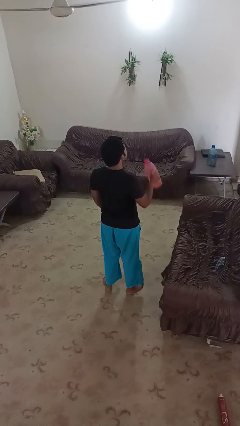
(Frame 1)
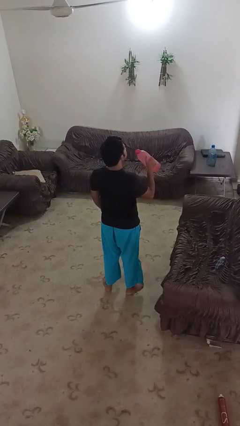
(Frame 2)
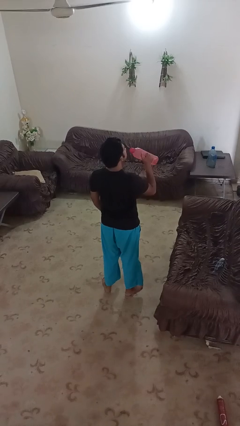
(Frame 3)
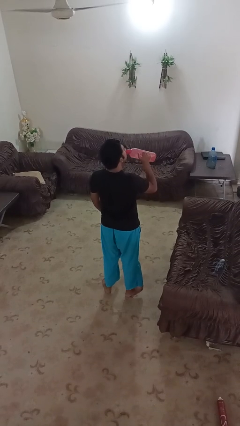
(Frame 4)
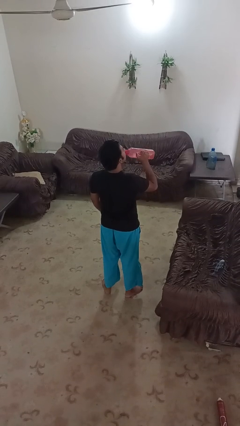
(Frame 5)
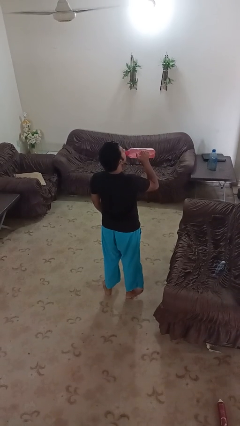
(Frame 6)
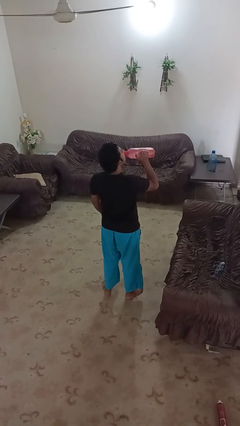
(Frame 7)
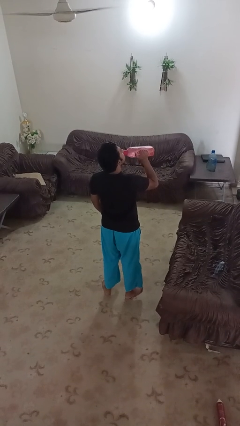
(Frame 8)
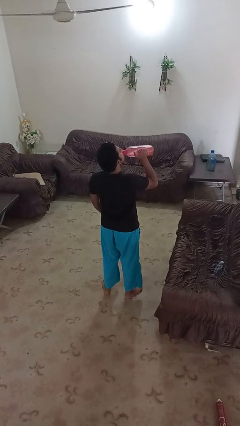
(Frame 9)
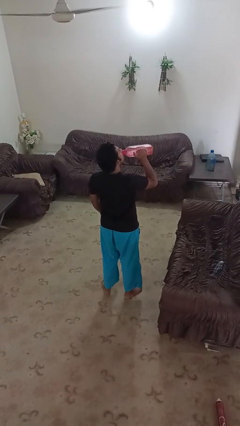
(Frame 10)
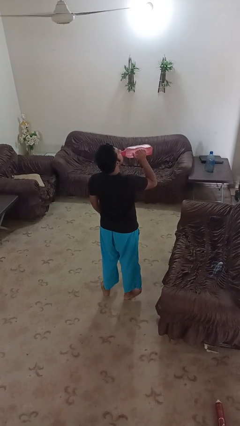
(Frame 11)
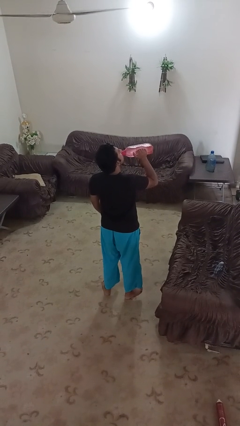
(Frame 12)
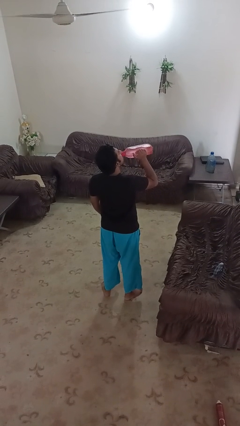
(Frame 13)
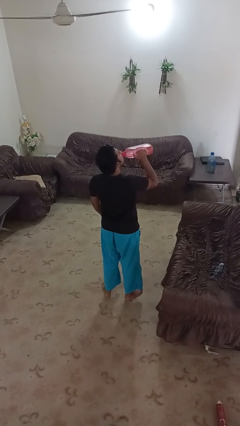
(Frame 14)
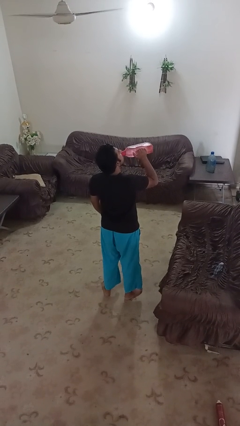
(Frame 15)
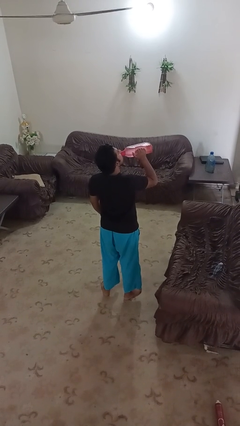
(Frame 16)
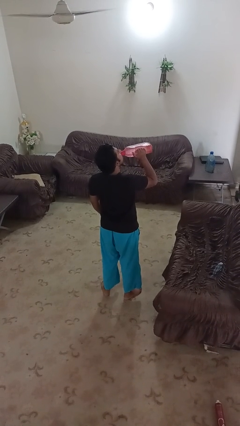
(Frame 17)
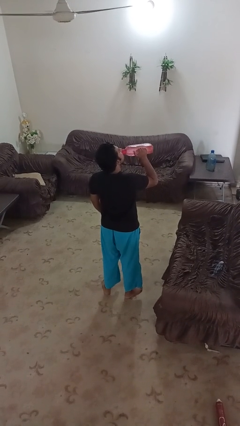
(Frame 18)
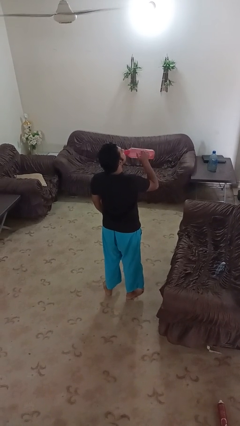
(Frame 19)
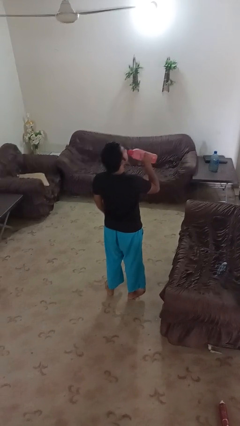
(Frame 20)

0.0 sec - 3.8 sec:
person drinks from bottle

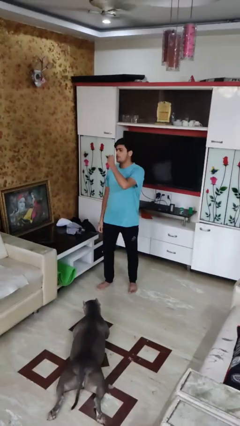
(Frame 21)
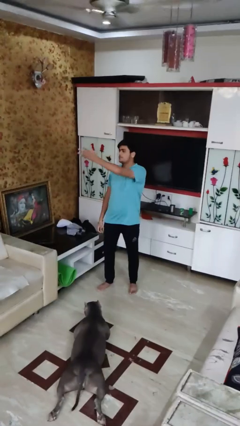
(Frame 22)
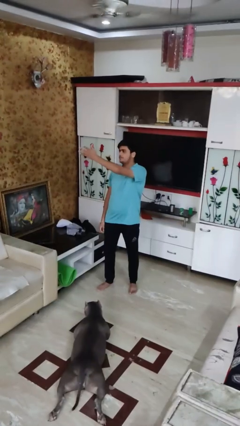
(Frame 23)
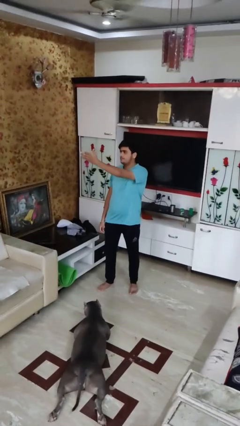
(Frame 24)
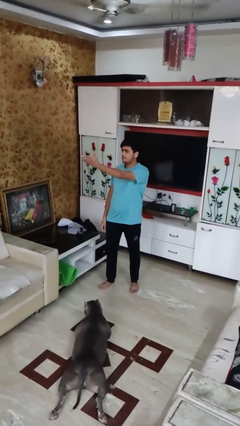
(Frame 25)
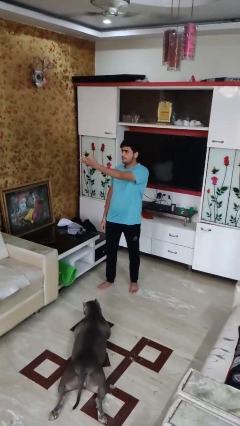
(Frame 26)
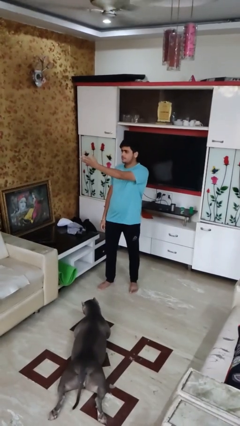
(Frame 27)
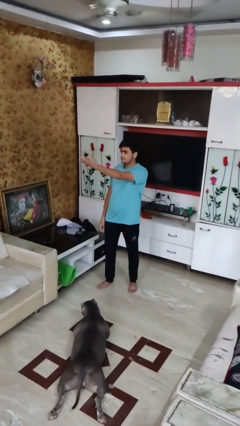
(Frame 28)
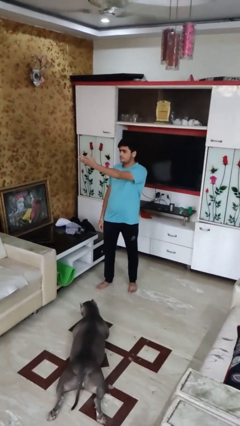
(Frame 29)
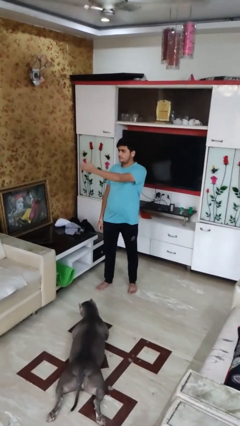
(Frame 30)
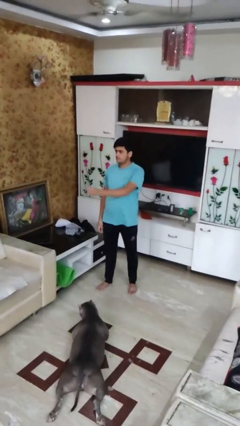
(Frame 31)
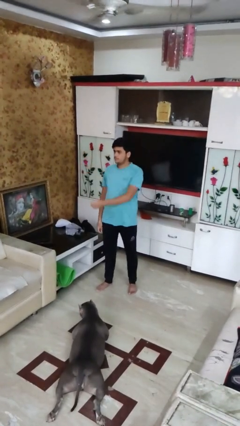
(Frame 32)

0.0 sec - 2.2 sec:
person gestures blow kiss

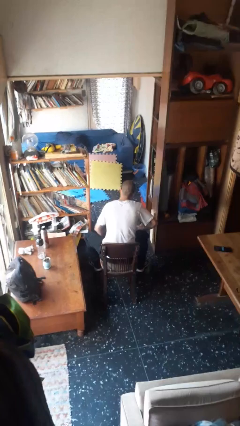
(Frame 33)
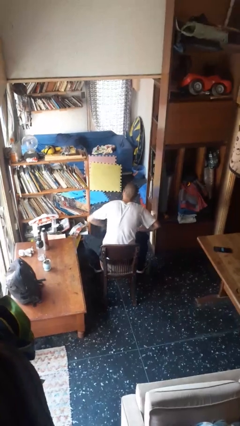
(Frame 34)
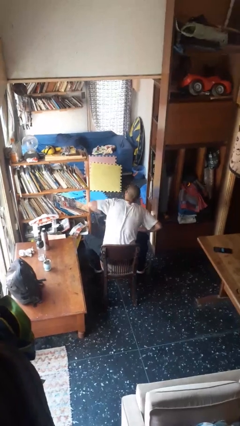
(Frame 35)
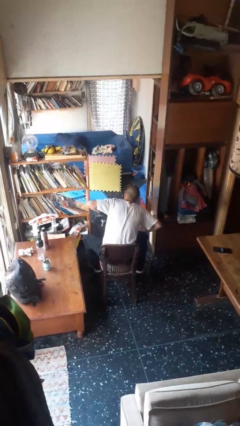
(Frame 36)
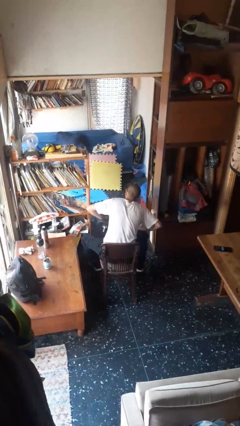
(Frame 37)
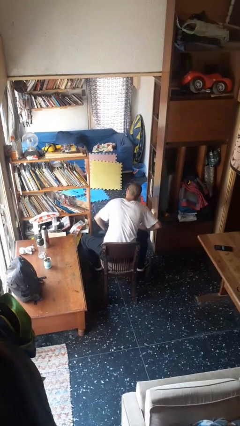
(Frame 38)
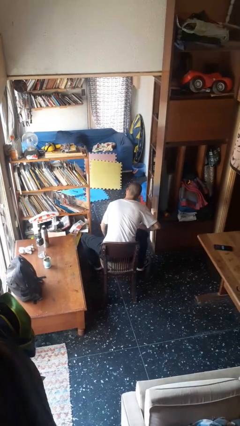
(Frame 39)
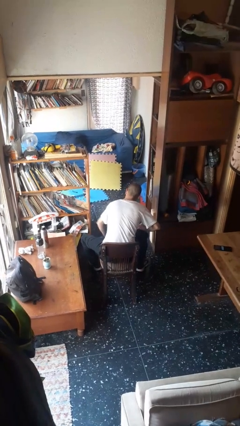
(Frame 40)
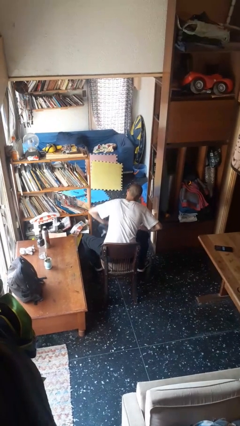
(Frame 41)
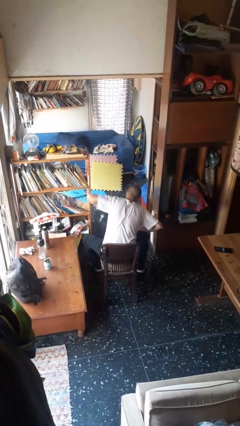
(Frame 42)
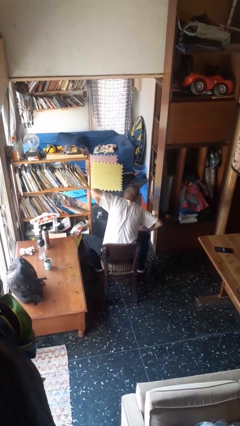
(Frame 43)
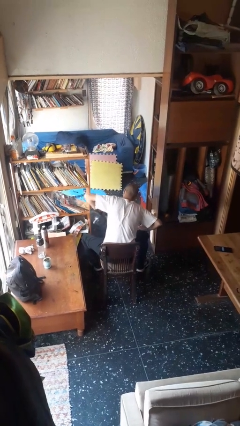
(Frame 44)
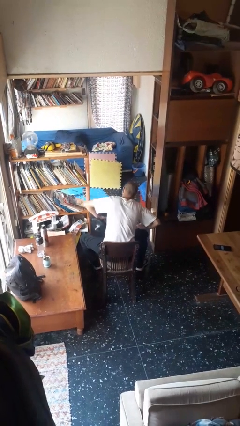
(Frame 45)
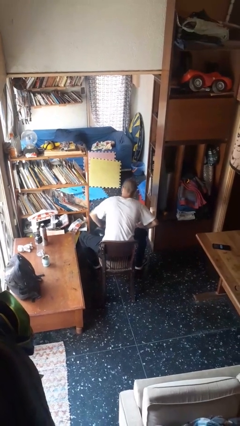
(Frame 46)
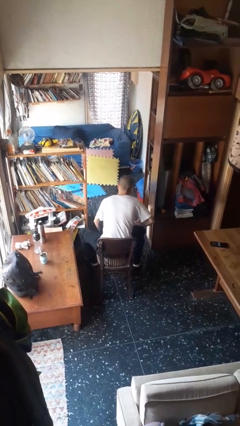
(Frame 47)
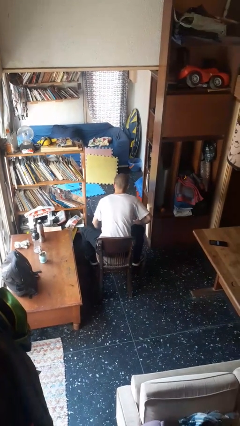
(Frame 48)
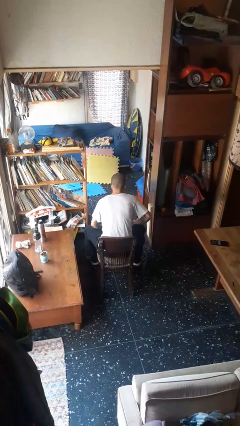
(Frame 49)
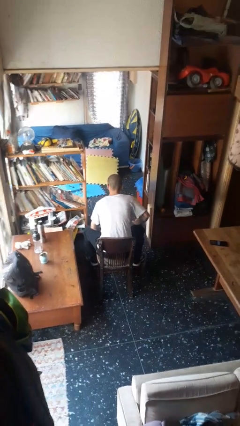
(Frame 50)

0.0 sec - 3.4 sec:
person lifts dumbbells

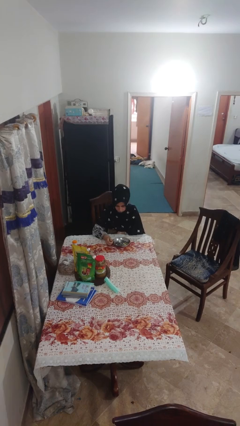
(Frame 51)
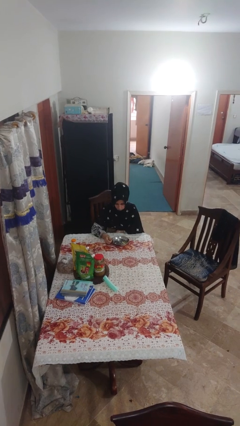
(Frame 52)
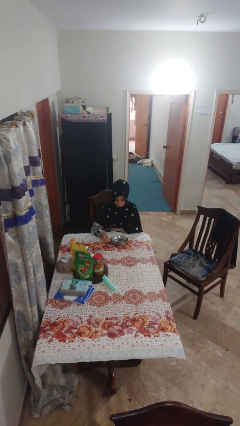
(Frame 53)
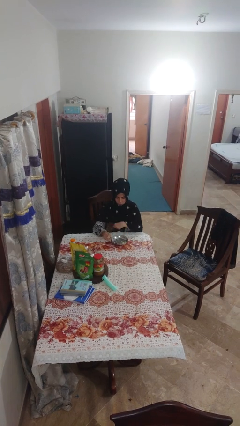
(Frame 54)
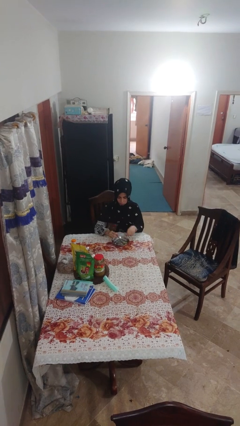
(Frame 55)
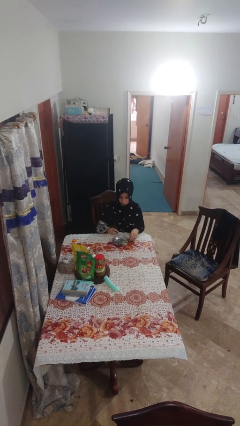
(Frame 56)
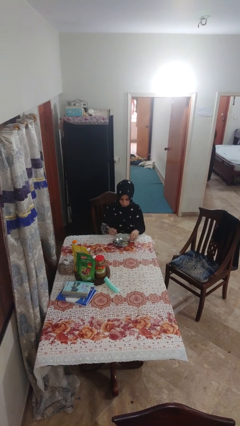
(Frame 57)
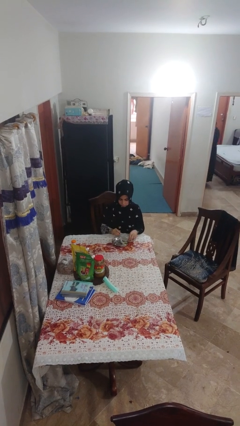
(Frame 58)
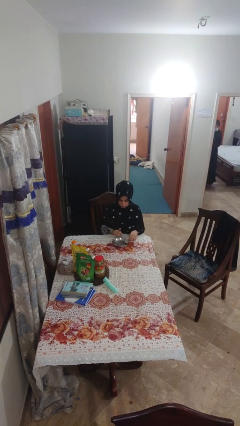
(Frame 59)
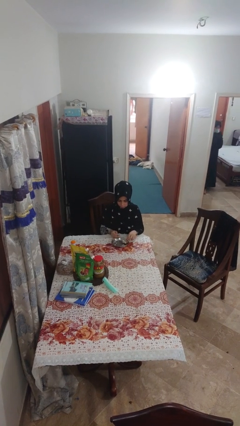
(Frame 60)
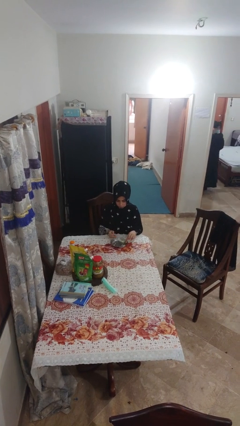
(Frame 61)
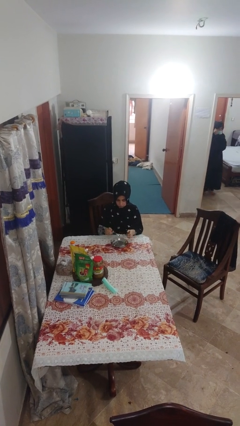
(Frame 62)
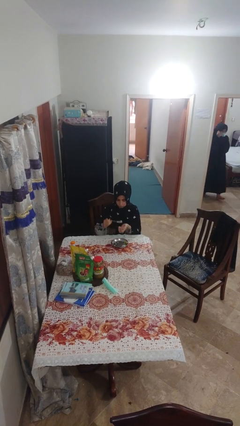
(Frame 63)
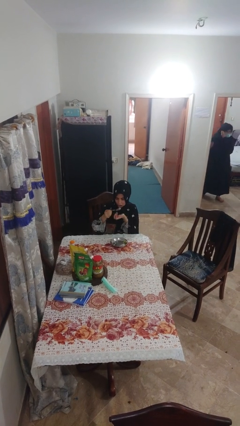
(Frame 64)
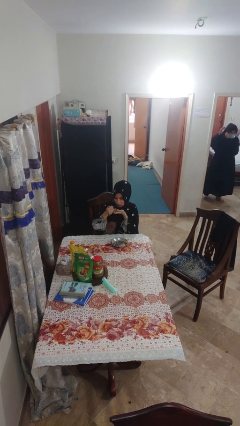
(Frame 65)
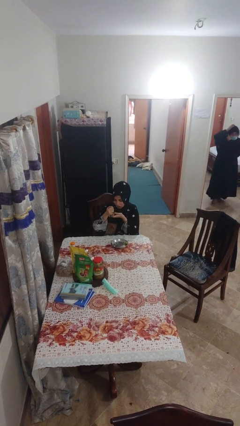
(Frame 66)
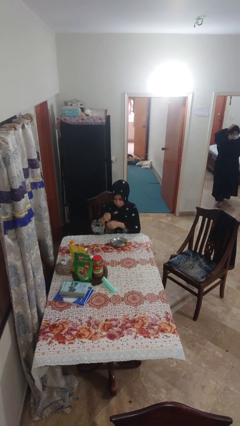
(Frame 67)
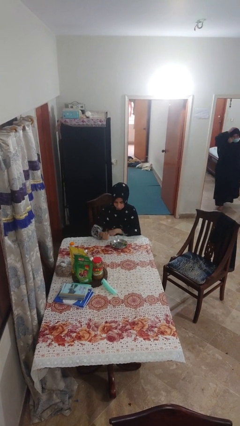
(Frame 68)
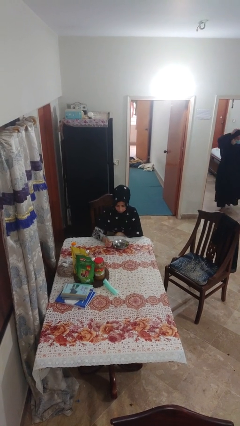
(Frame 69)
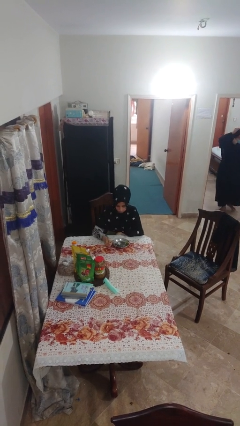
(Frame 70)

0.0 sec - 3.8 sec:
person eats with utensil

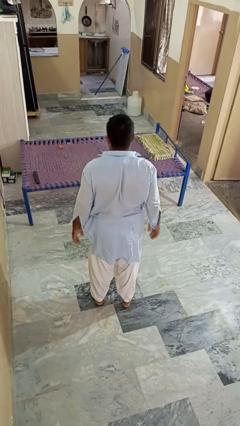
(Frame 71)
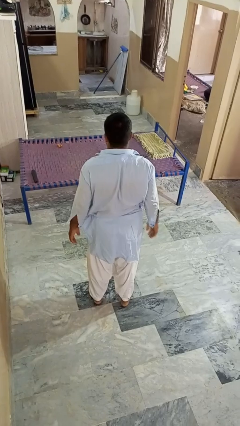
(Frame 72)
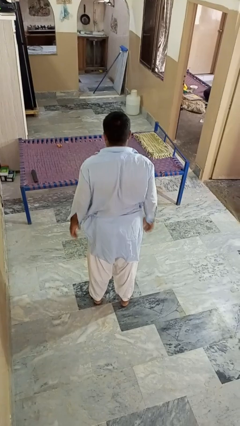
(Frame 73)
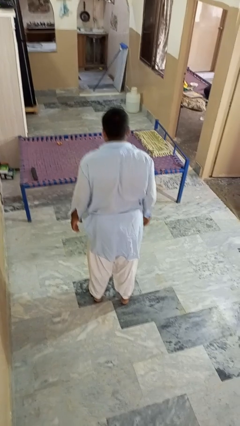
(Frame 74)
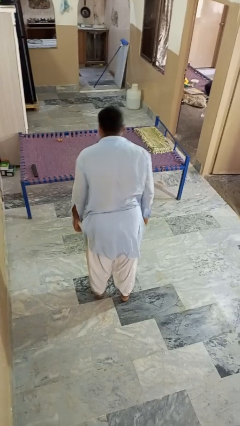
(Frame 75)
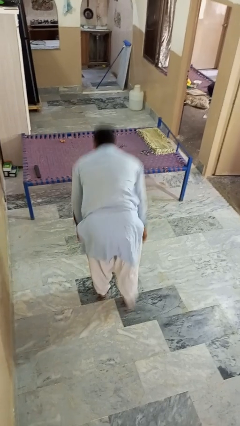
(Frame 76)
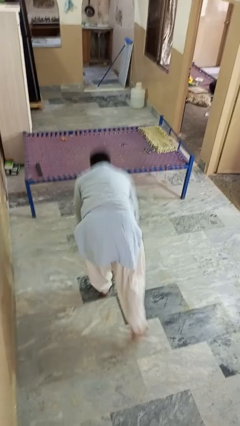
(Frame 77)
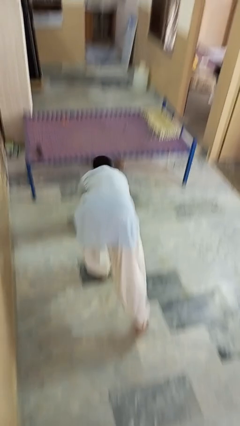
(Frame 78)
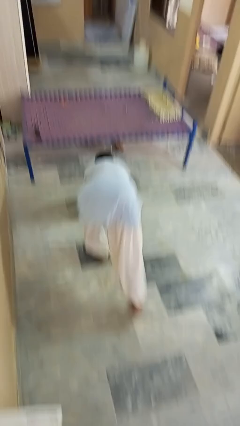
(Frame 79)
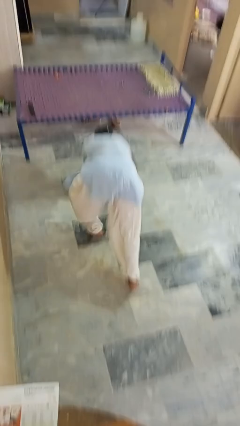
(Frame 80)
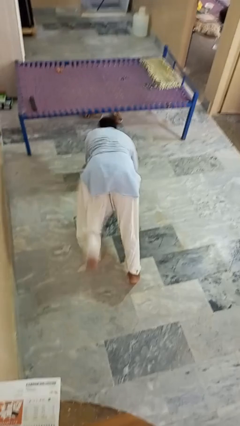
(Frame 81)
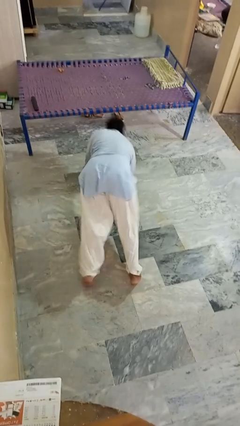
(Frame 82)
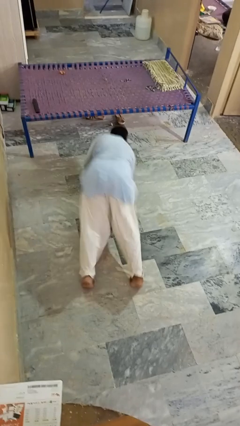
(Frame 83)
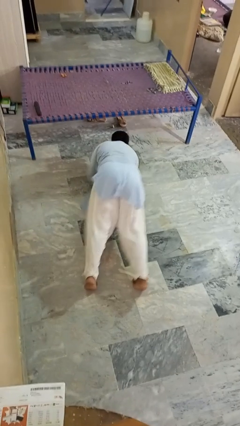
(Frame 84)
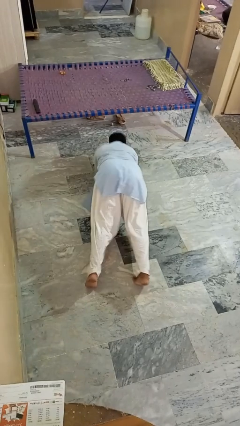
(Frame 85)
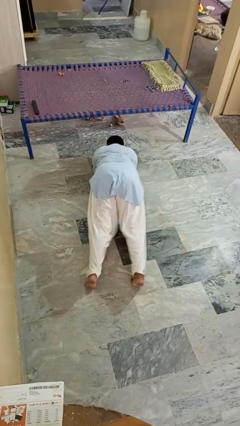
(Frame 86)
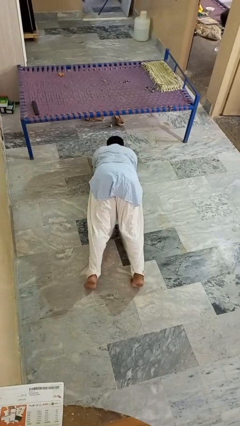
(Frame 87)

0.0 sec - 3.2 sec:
person exercises with plank

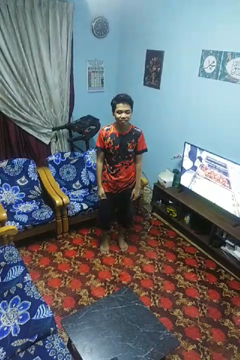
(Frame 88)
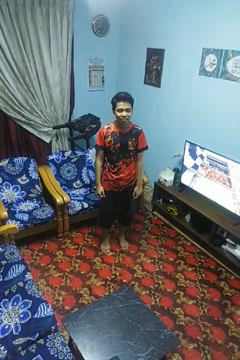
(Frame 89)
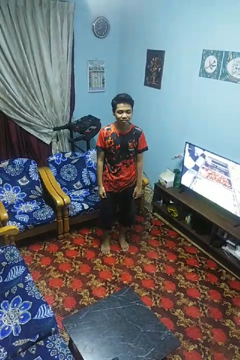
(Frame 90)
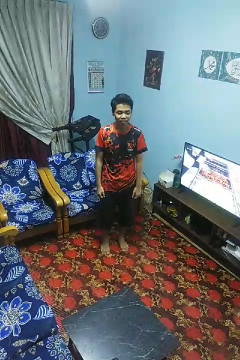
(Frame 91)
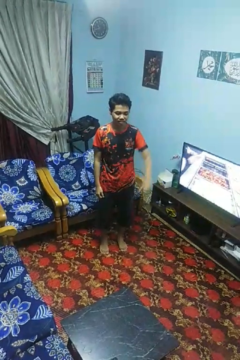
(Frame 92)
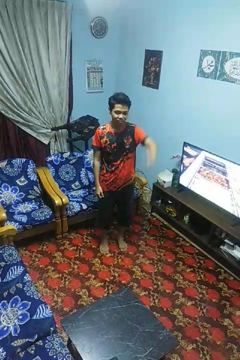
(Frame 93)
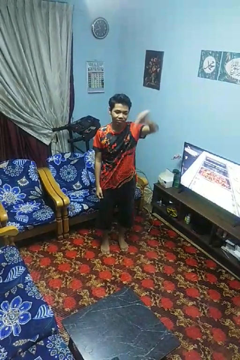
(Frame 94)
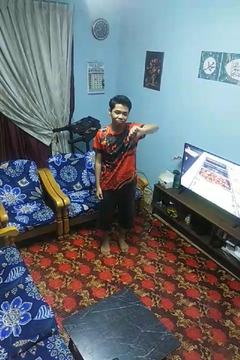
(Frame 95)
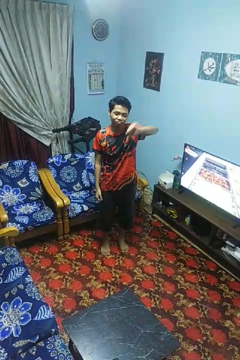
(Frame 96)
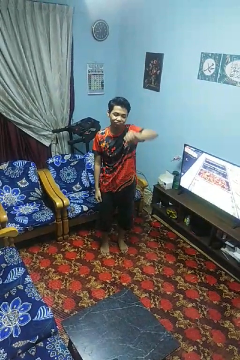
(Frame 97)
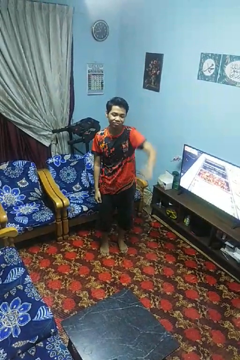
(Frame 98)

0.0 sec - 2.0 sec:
person gestures thumbs down
